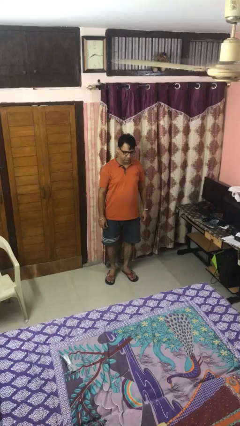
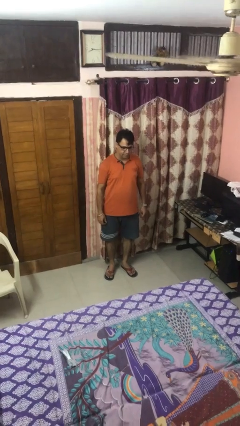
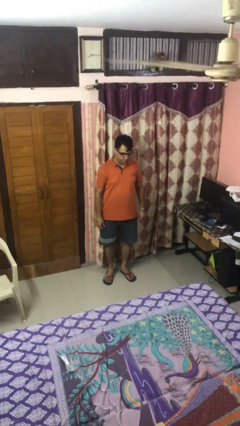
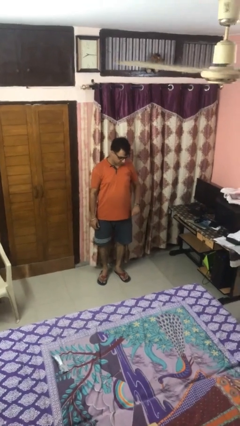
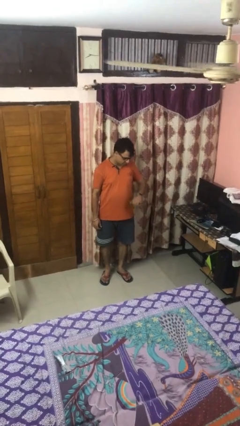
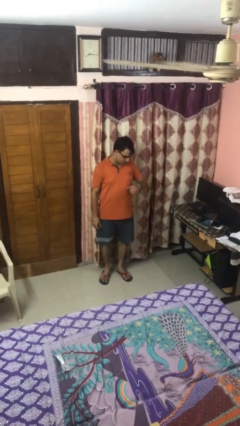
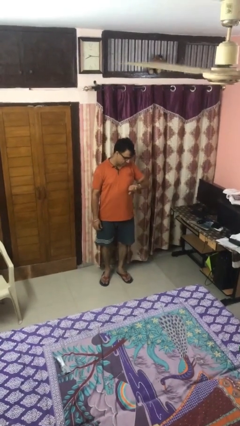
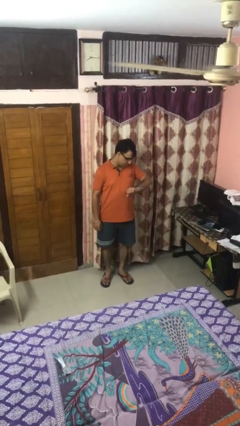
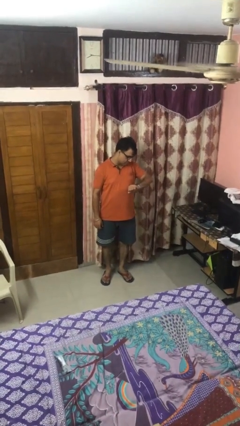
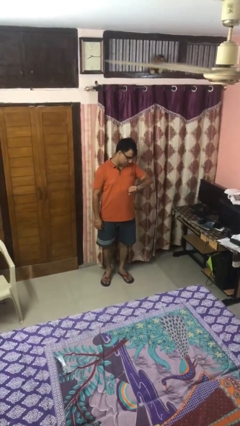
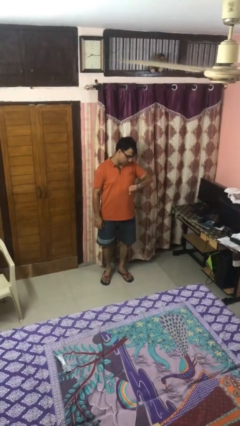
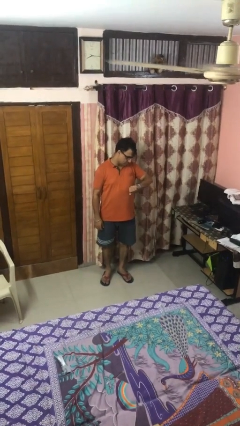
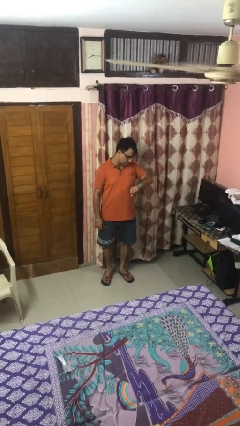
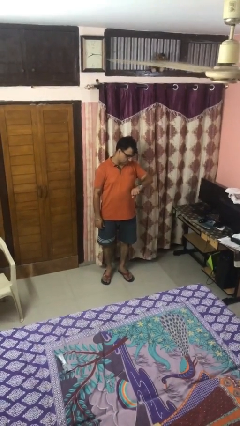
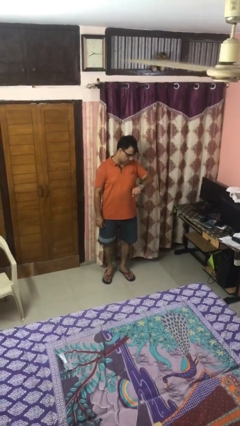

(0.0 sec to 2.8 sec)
person looks at wristwatch

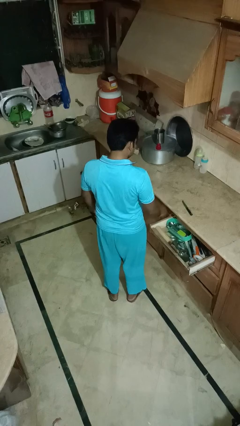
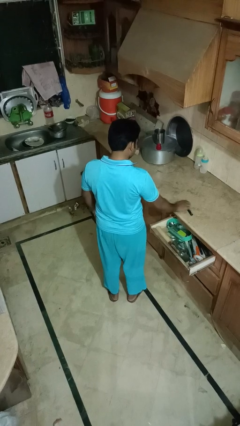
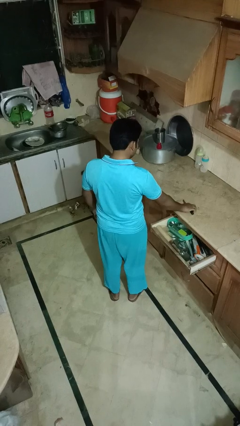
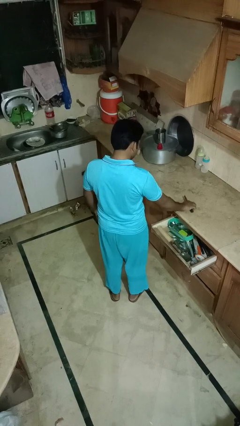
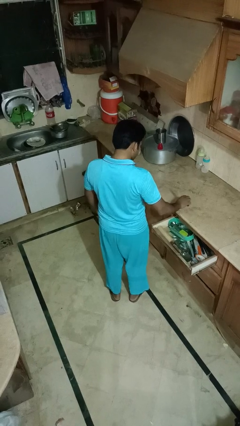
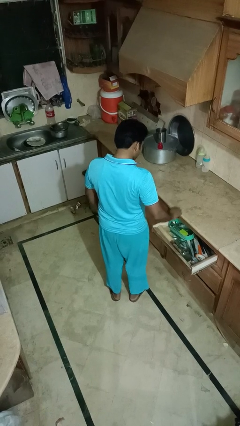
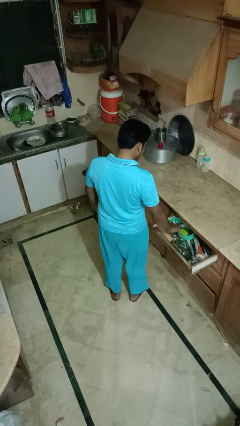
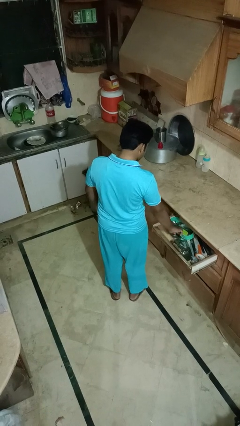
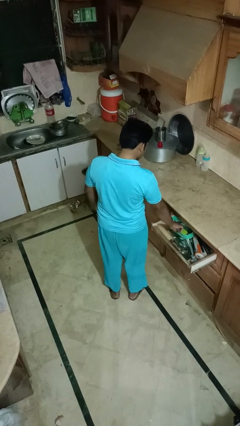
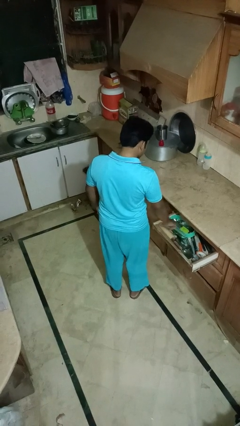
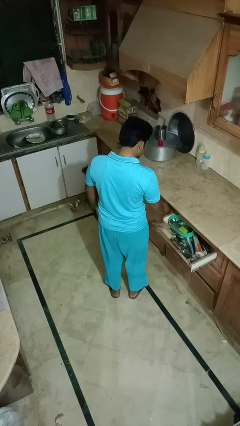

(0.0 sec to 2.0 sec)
person puts object into kitchen drawer

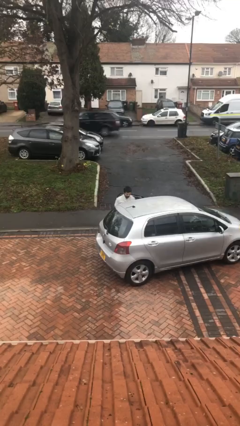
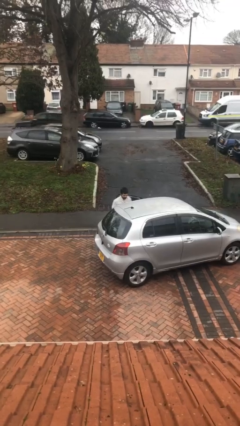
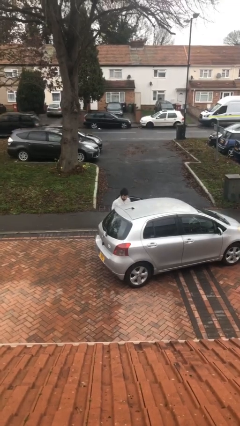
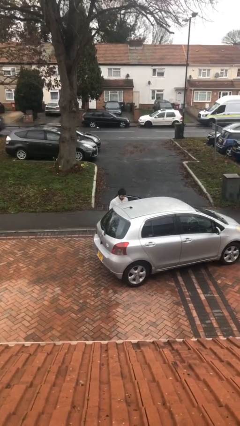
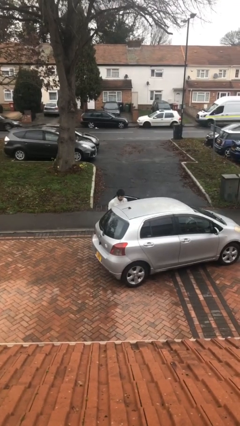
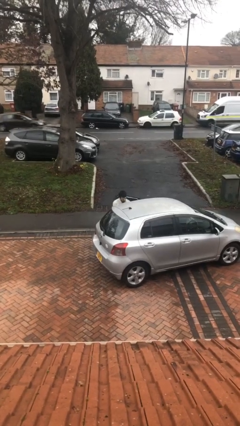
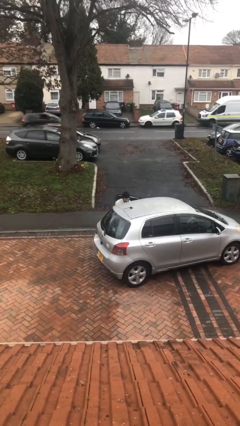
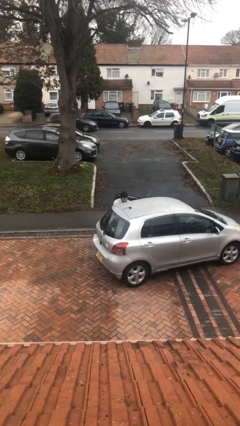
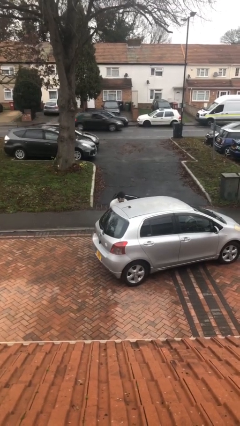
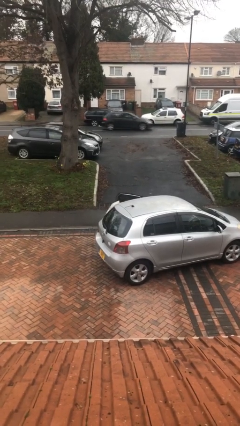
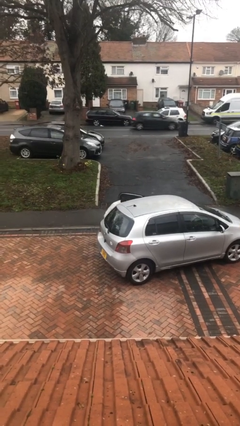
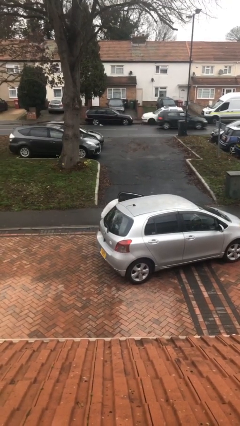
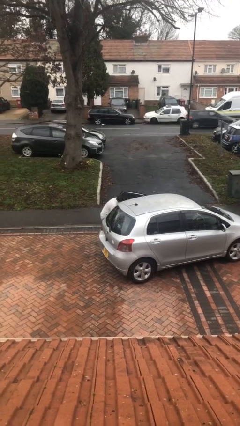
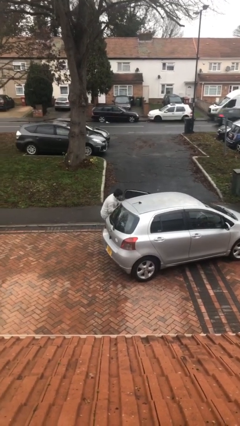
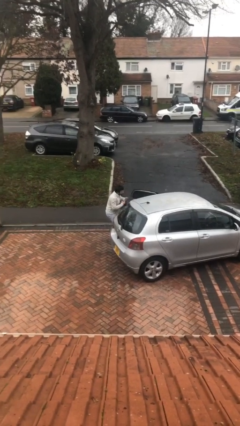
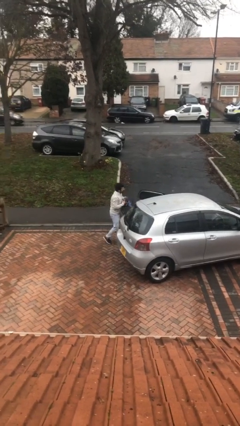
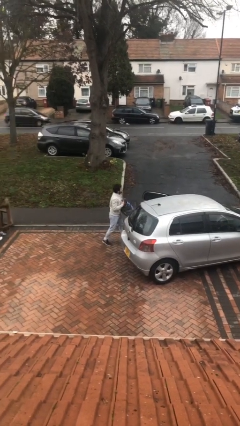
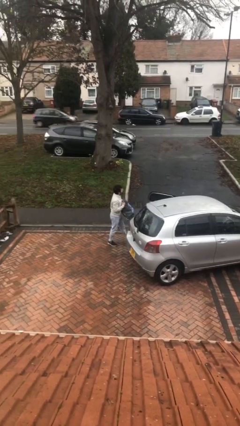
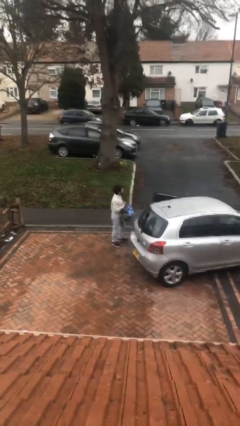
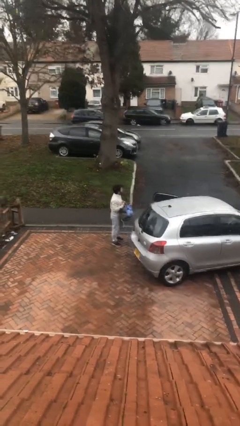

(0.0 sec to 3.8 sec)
person unloads car

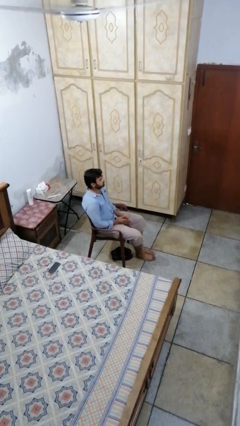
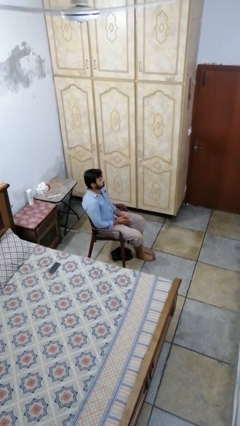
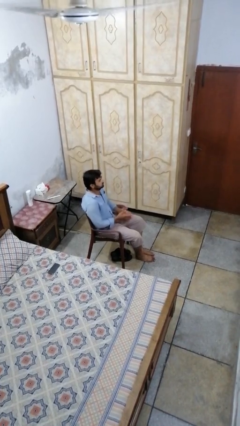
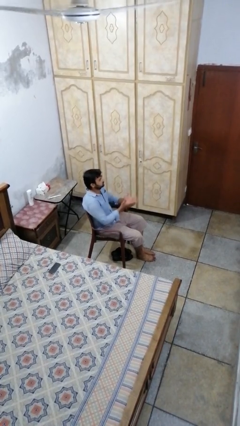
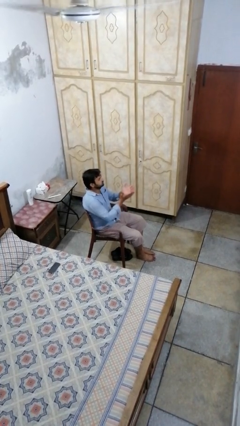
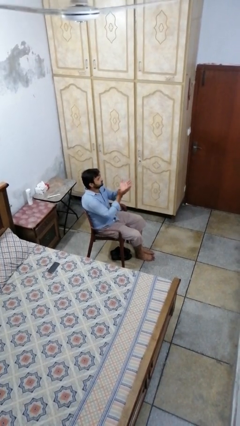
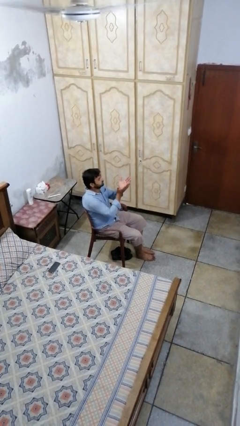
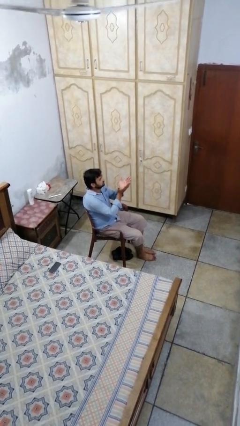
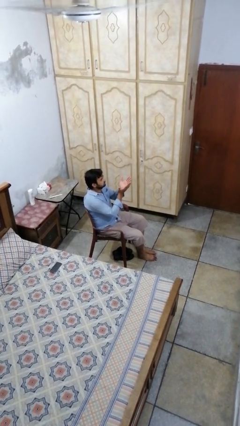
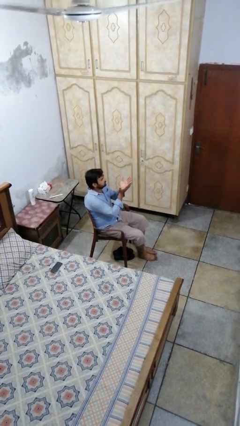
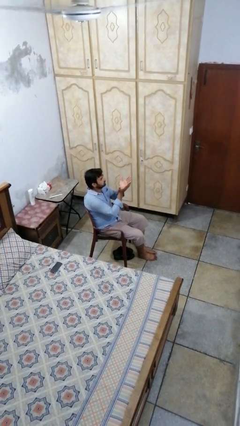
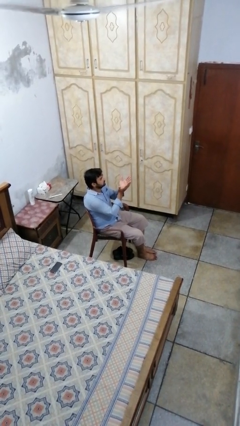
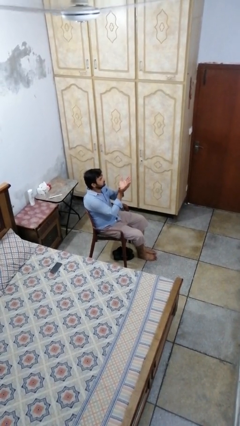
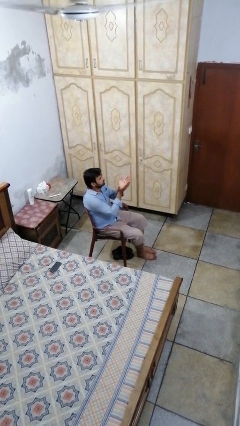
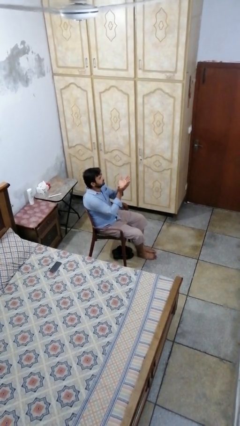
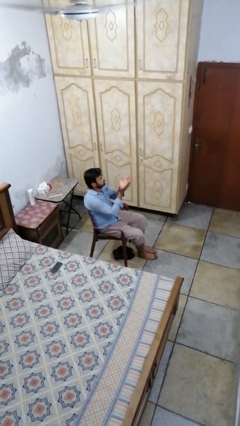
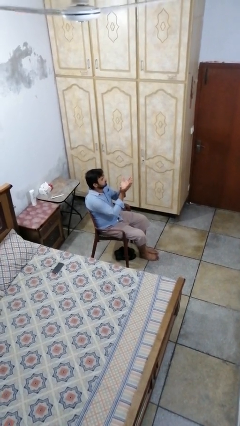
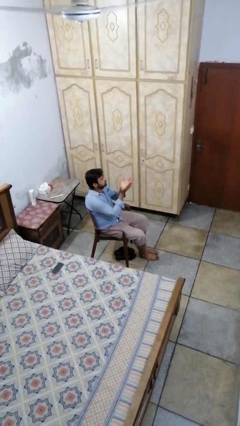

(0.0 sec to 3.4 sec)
person prays

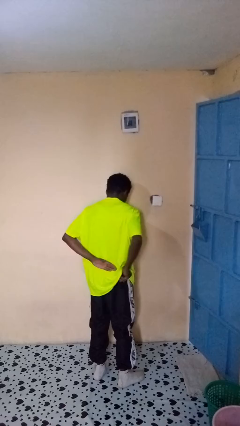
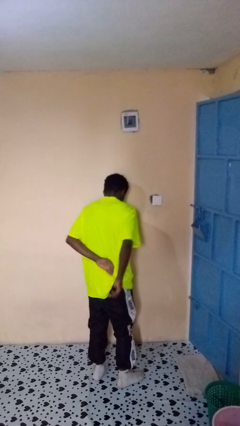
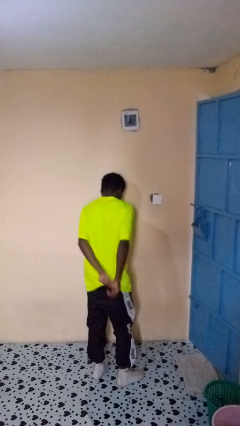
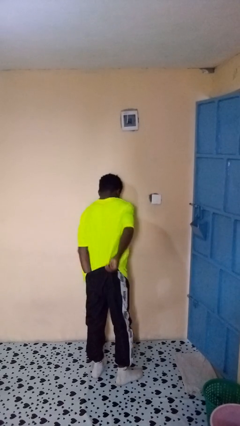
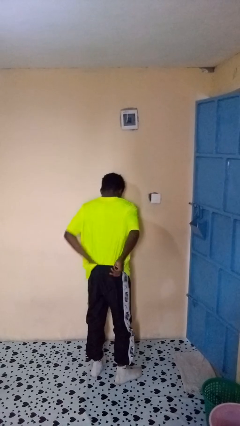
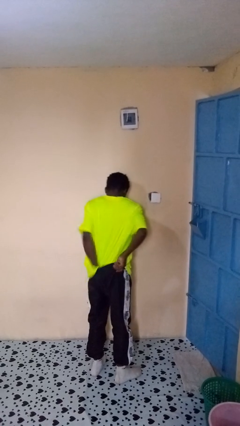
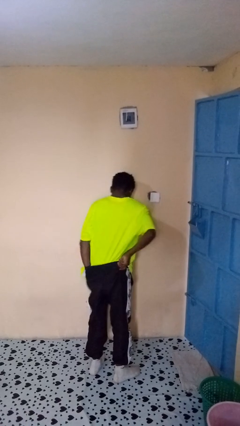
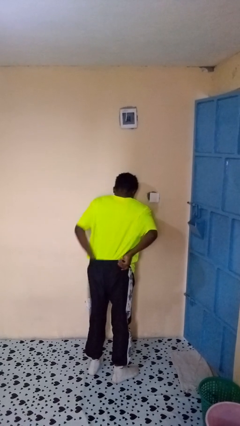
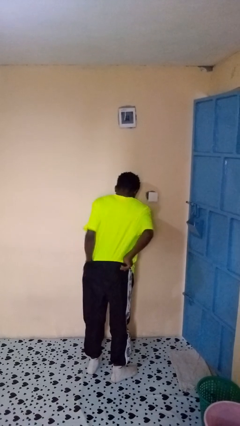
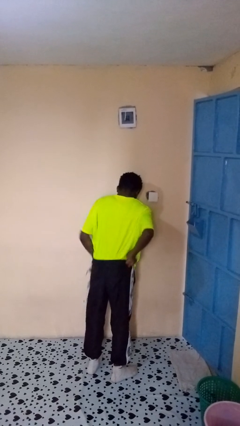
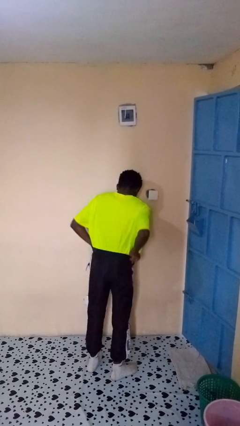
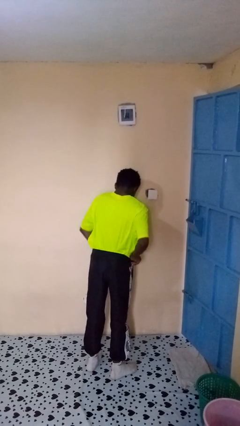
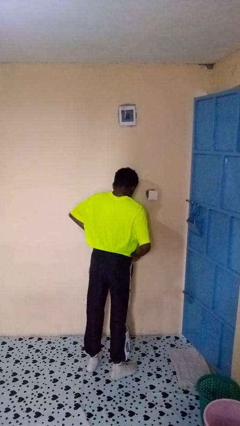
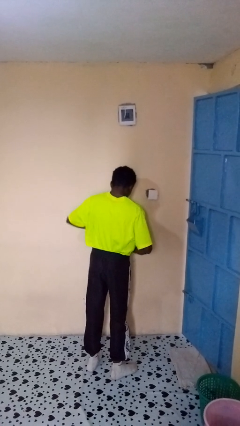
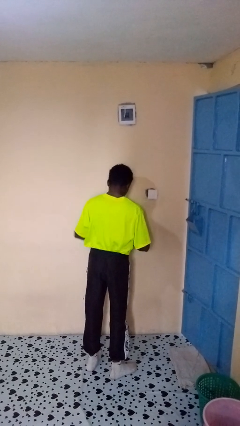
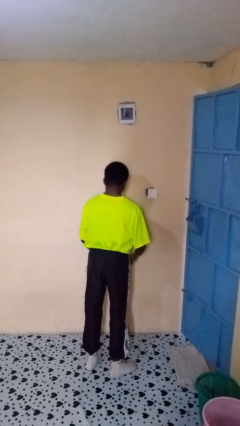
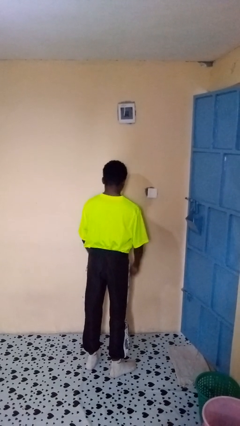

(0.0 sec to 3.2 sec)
person tucks in shirt

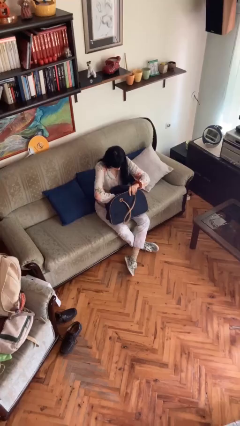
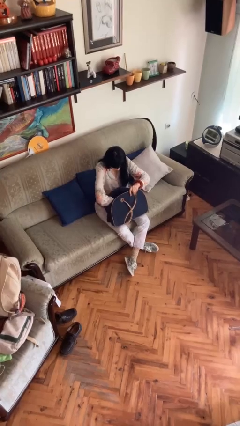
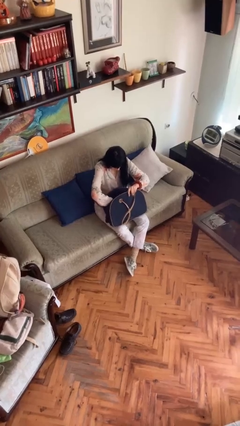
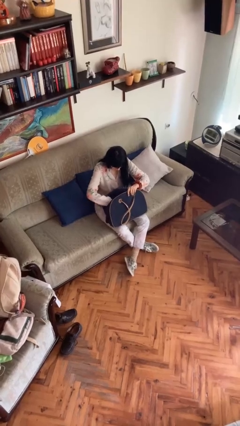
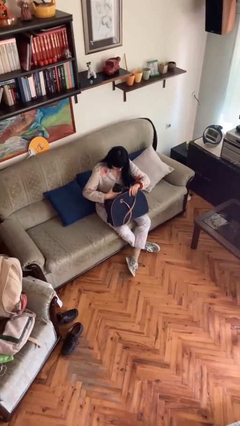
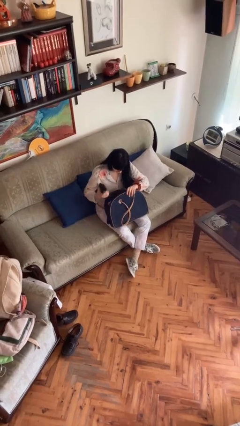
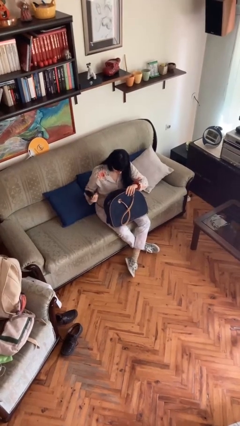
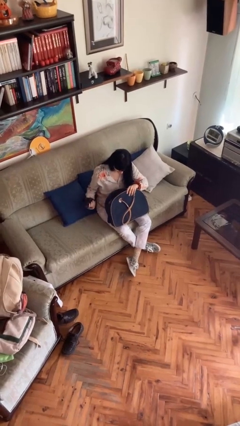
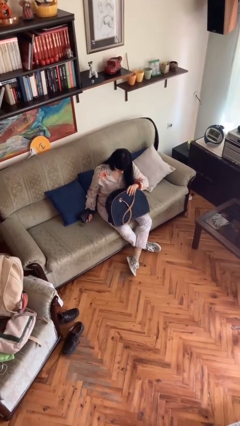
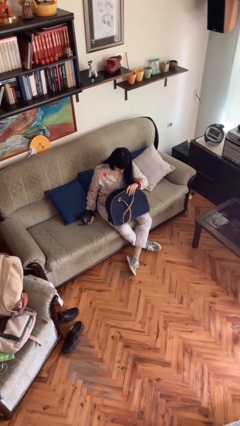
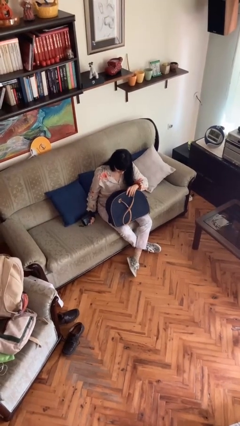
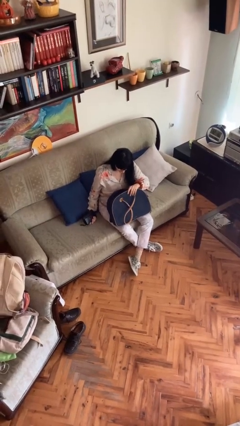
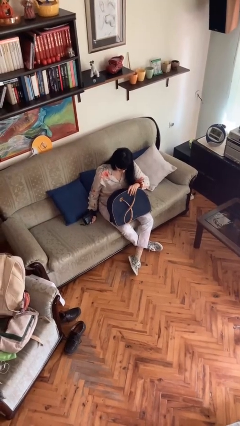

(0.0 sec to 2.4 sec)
person takes object from purse
